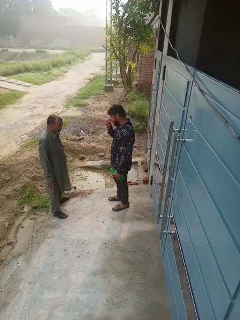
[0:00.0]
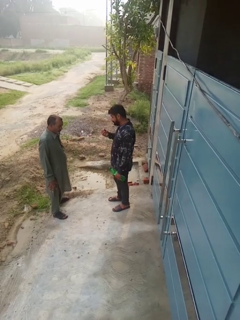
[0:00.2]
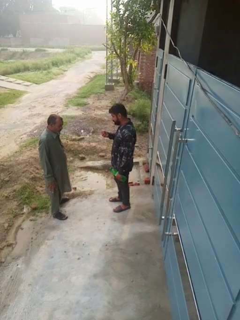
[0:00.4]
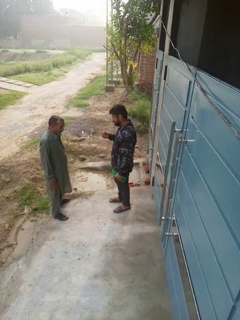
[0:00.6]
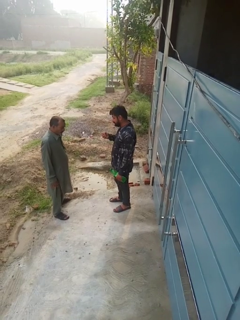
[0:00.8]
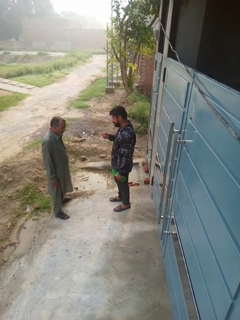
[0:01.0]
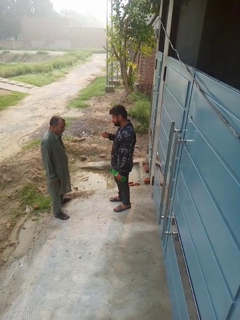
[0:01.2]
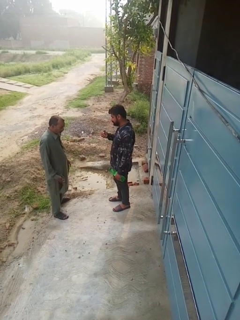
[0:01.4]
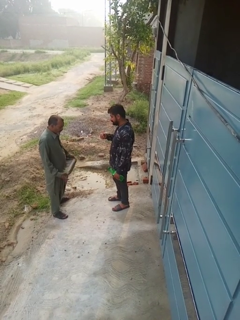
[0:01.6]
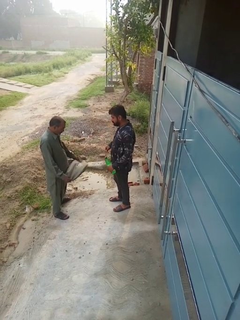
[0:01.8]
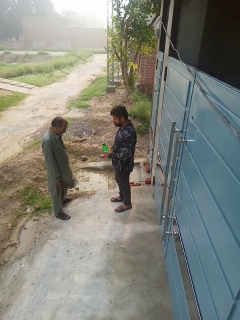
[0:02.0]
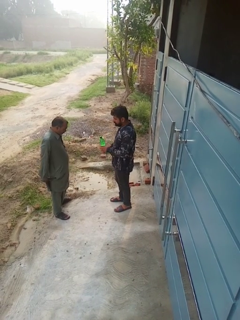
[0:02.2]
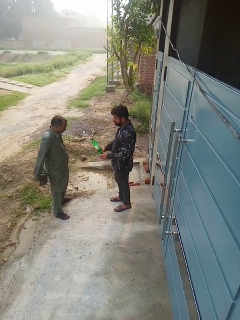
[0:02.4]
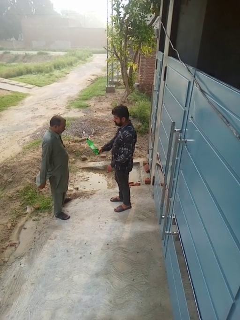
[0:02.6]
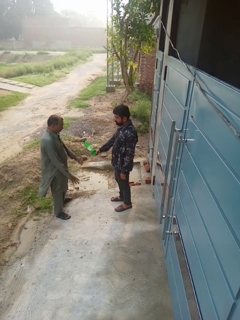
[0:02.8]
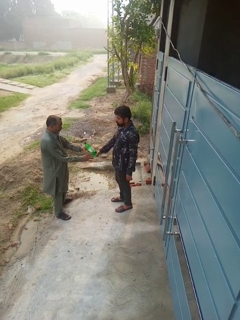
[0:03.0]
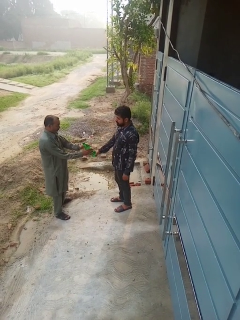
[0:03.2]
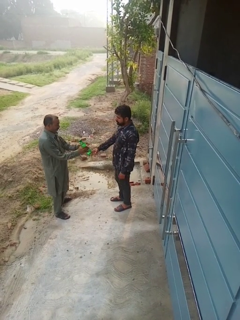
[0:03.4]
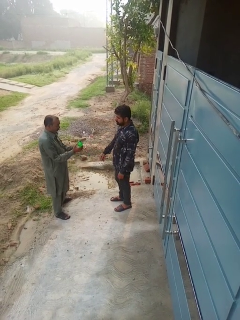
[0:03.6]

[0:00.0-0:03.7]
person transfers object to person

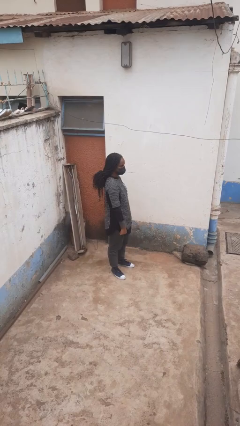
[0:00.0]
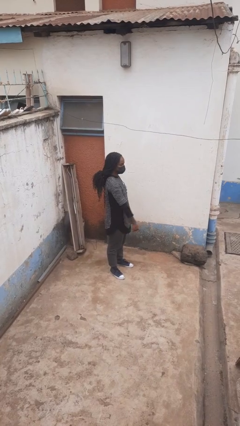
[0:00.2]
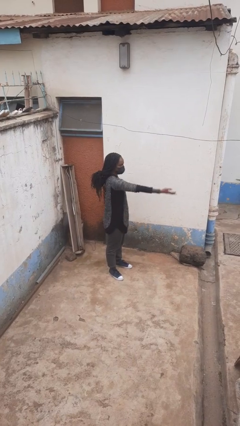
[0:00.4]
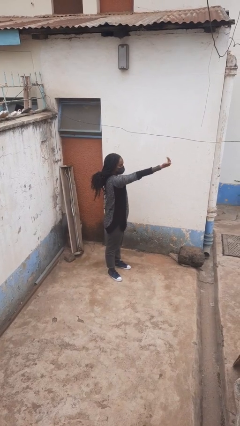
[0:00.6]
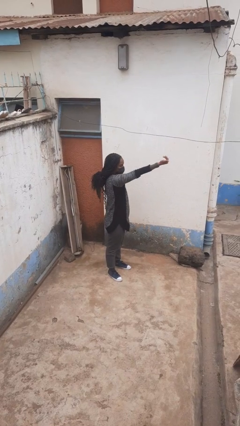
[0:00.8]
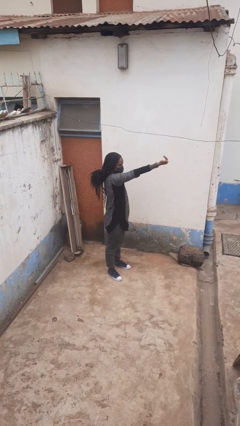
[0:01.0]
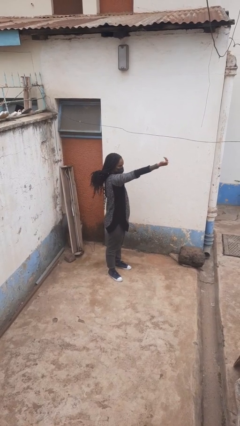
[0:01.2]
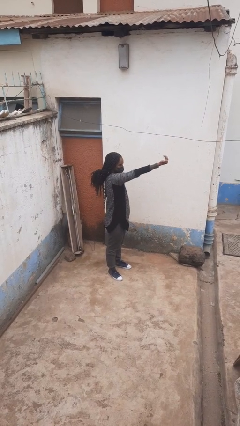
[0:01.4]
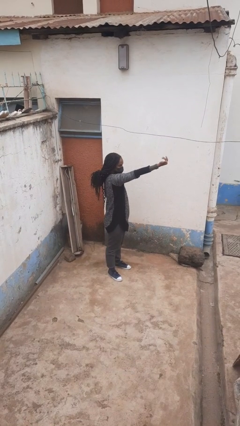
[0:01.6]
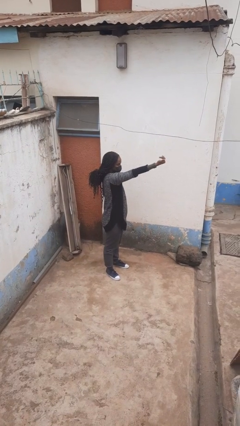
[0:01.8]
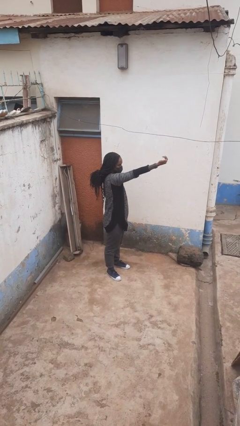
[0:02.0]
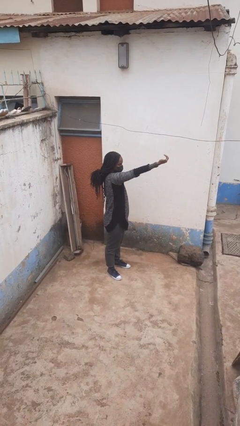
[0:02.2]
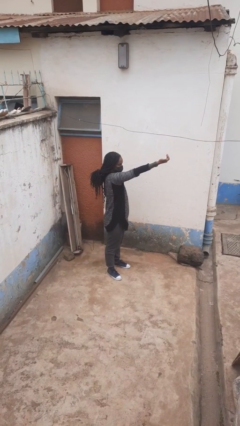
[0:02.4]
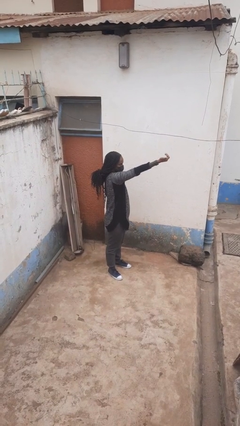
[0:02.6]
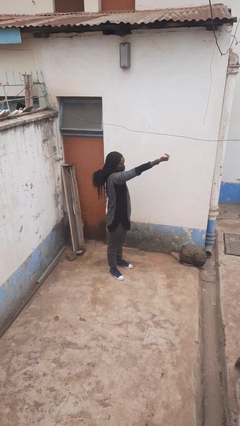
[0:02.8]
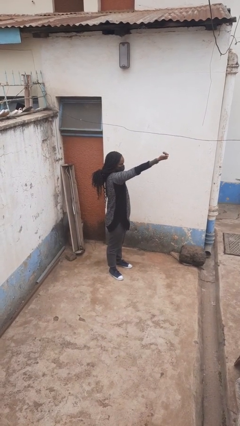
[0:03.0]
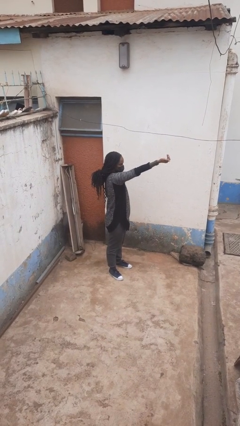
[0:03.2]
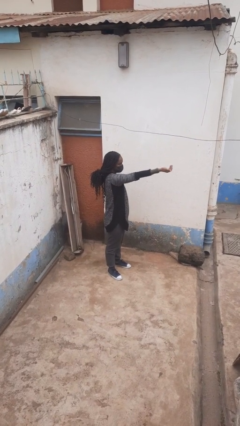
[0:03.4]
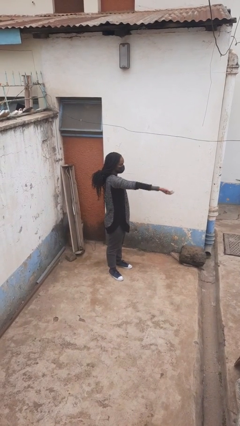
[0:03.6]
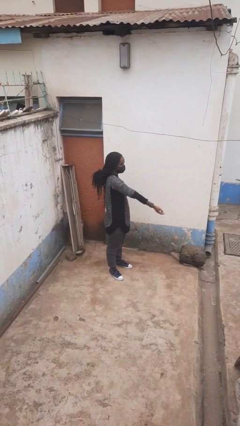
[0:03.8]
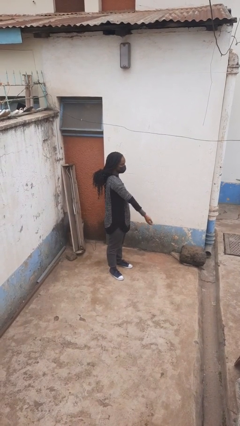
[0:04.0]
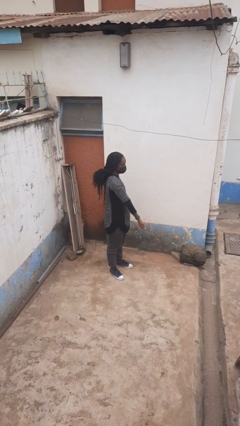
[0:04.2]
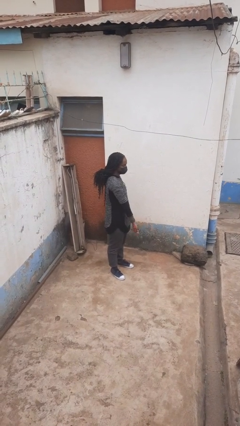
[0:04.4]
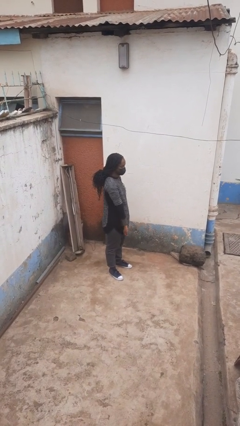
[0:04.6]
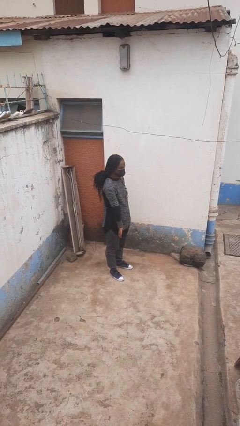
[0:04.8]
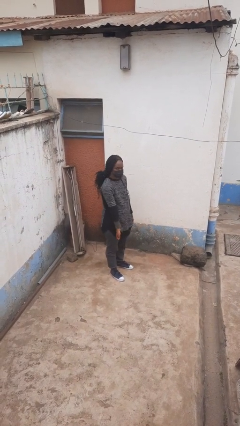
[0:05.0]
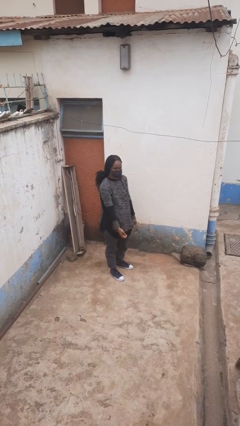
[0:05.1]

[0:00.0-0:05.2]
person gestures come here

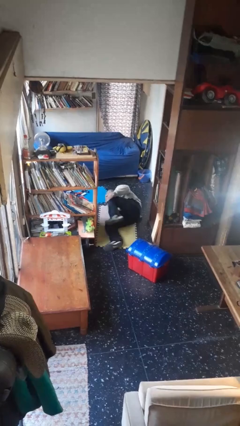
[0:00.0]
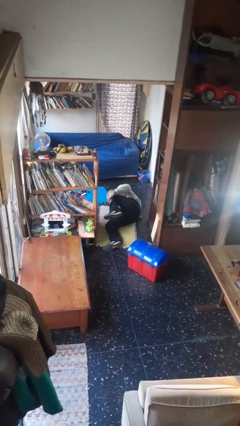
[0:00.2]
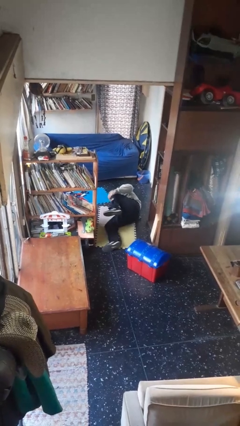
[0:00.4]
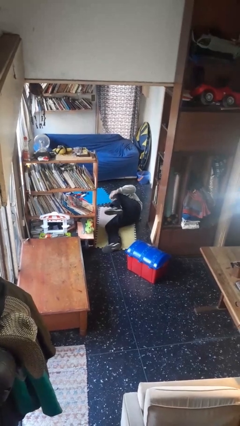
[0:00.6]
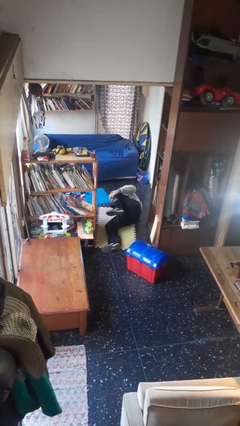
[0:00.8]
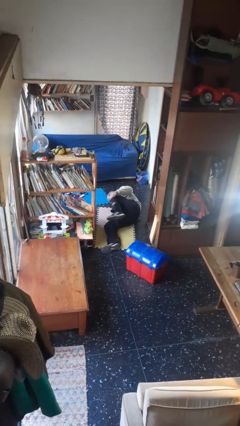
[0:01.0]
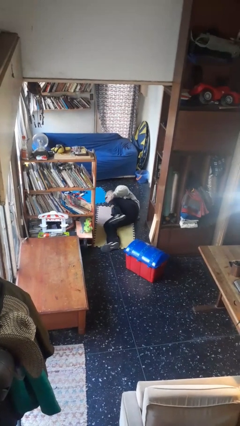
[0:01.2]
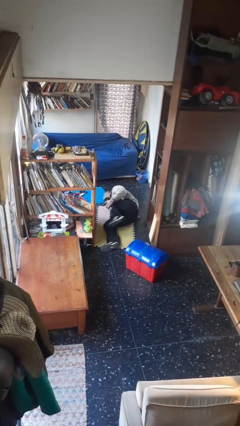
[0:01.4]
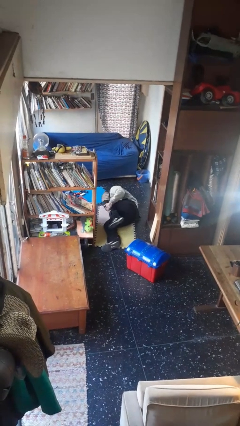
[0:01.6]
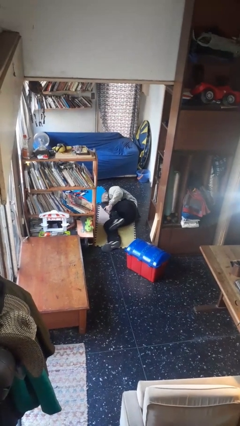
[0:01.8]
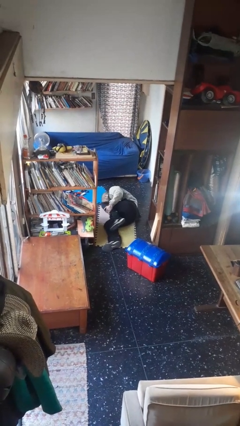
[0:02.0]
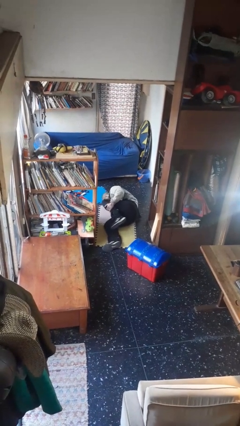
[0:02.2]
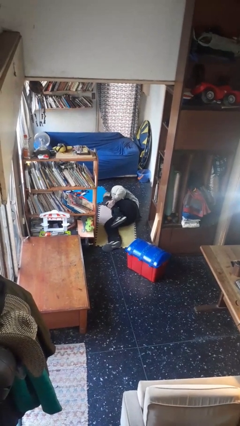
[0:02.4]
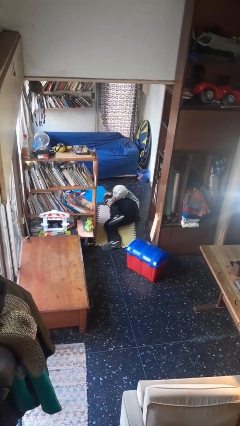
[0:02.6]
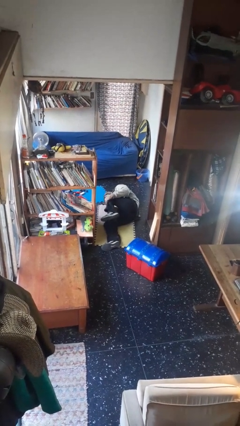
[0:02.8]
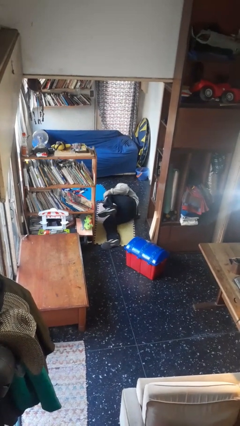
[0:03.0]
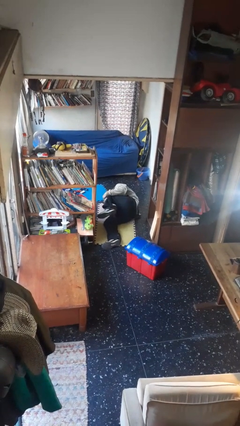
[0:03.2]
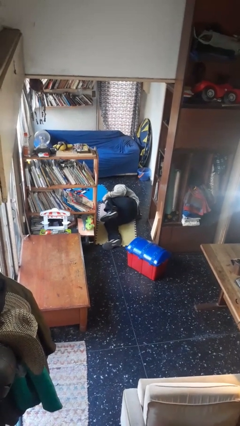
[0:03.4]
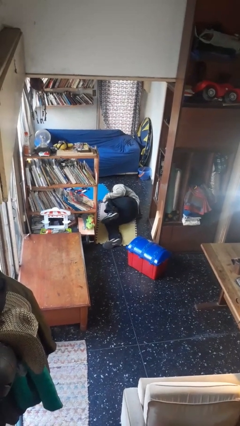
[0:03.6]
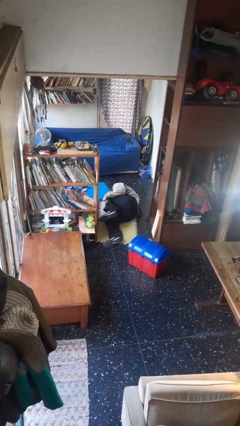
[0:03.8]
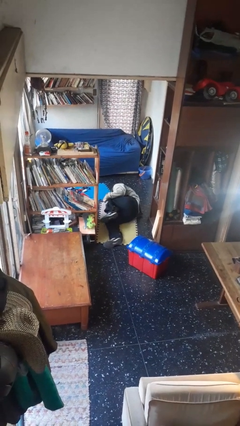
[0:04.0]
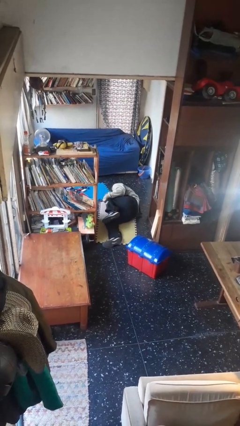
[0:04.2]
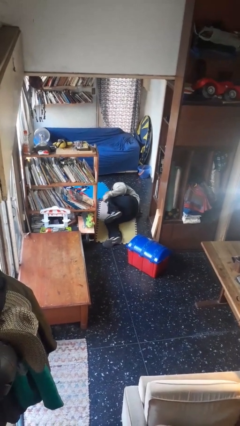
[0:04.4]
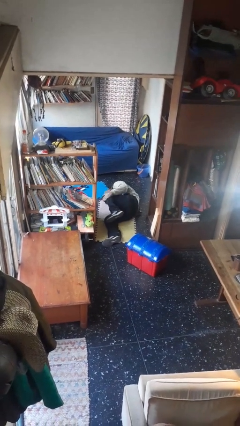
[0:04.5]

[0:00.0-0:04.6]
person lies down on floor

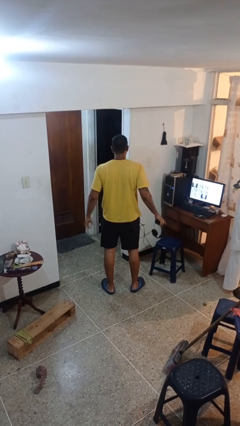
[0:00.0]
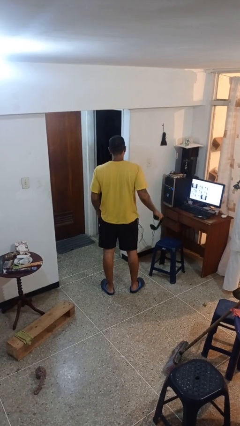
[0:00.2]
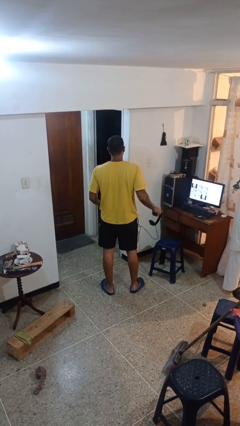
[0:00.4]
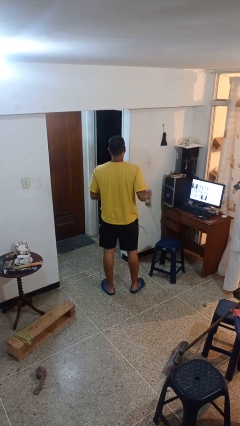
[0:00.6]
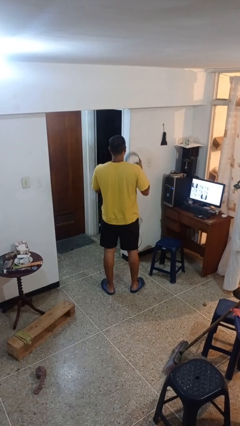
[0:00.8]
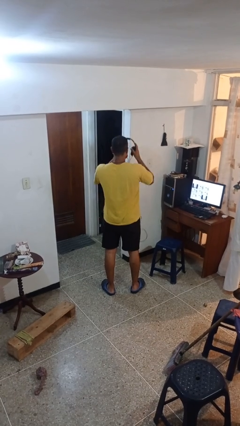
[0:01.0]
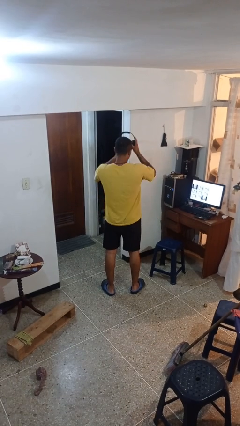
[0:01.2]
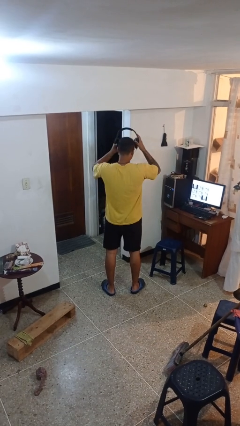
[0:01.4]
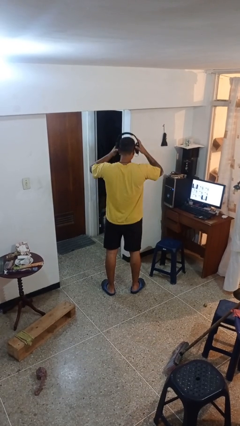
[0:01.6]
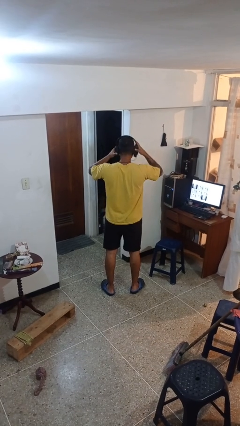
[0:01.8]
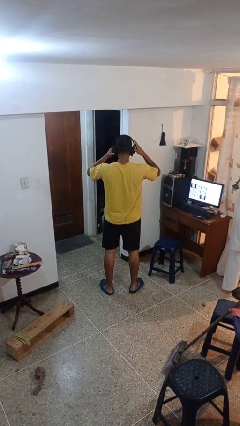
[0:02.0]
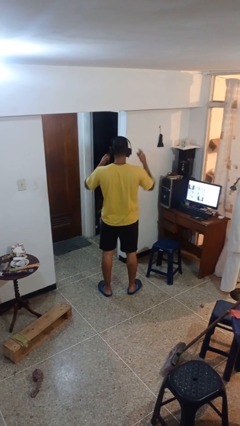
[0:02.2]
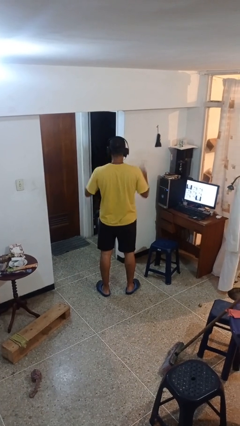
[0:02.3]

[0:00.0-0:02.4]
person puts on headphones

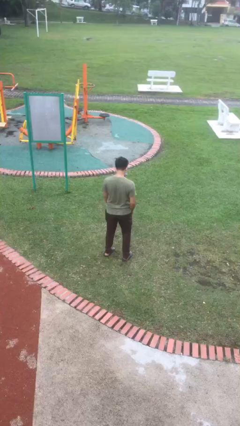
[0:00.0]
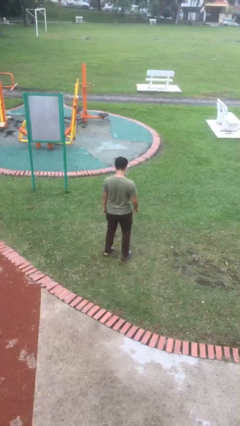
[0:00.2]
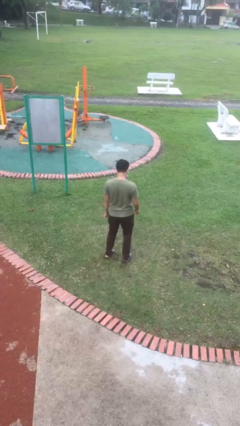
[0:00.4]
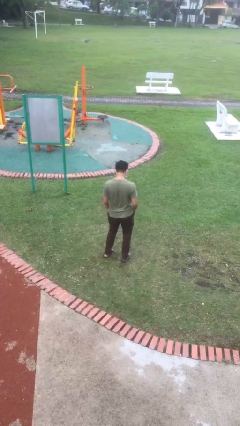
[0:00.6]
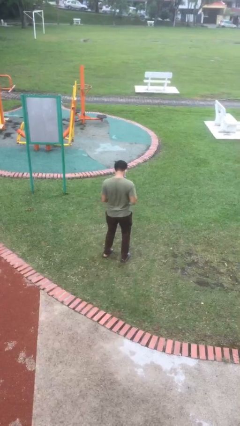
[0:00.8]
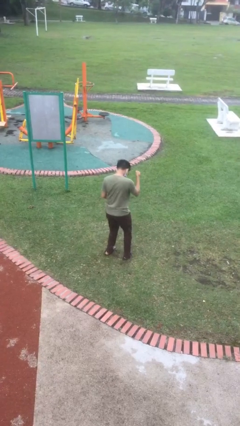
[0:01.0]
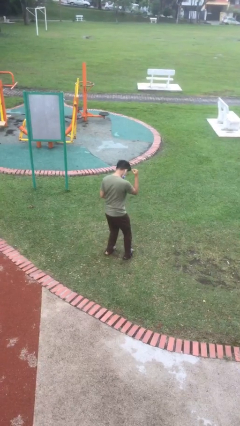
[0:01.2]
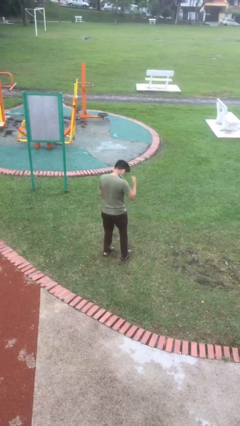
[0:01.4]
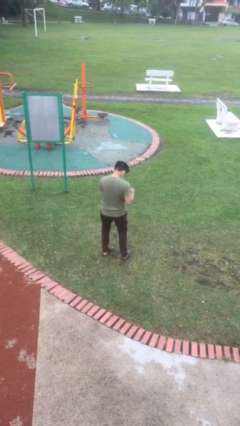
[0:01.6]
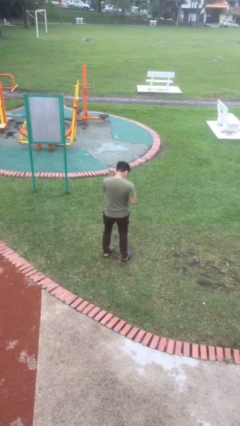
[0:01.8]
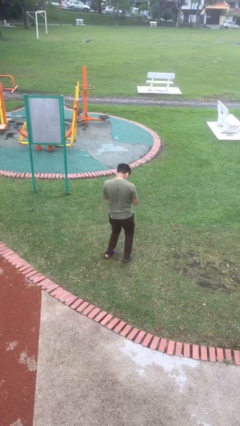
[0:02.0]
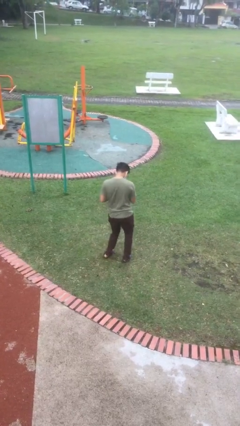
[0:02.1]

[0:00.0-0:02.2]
person dances in place

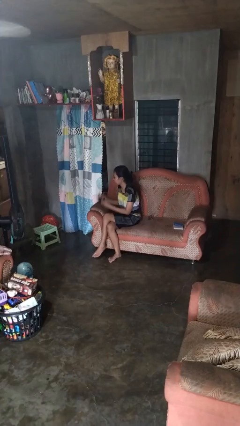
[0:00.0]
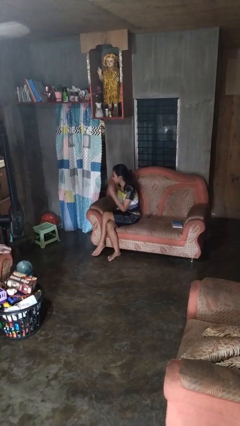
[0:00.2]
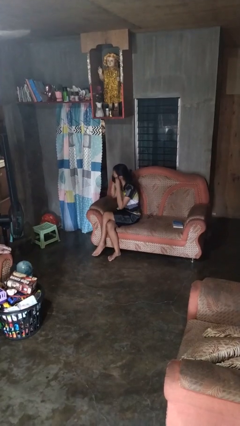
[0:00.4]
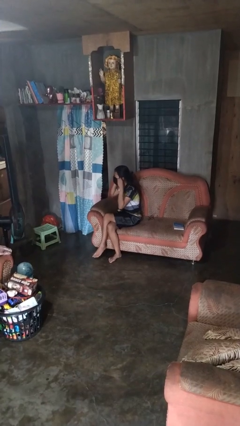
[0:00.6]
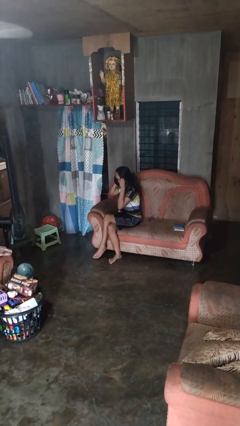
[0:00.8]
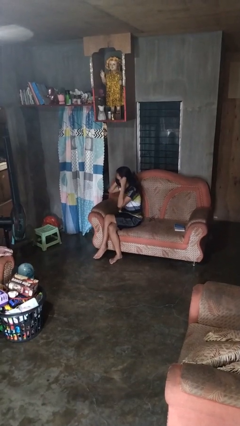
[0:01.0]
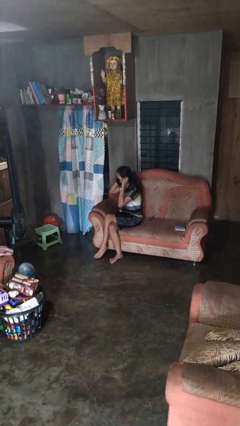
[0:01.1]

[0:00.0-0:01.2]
person puts on facemask
